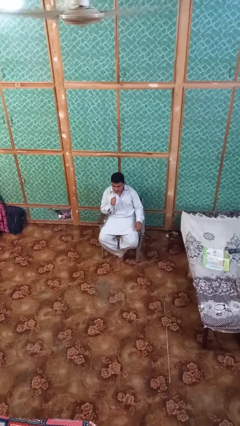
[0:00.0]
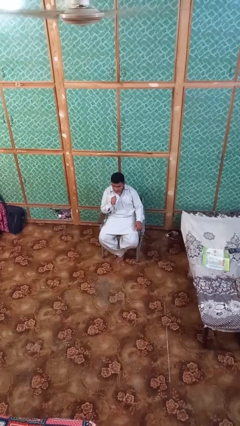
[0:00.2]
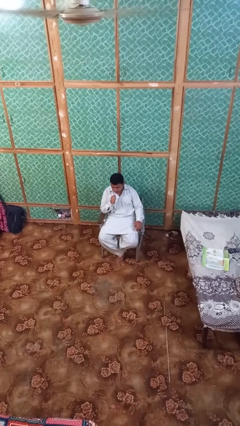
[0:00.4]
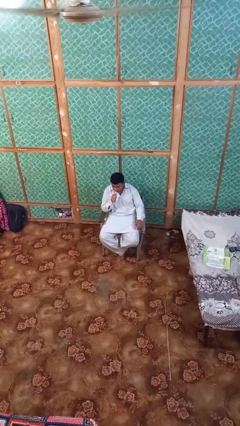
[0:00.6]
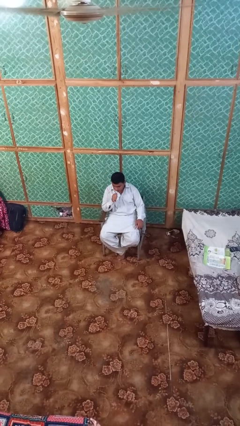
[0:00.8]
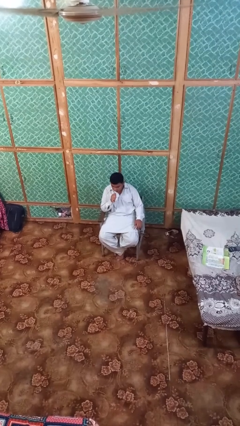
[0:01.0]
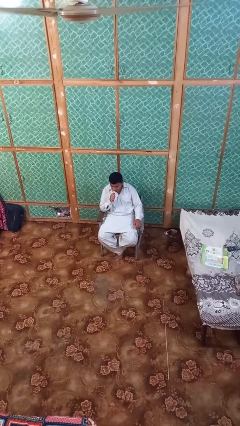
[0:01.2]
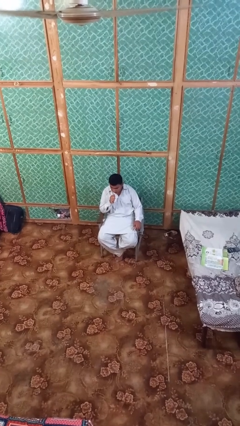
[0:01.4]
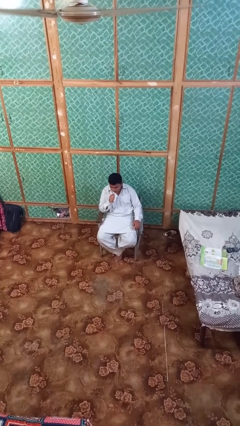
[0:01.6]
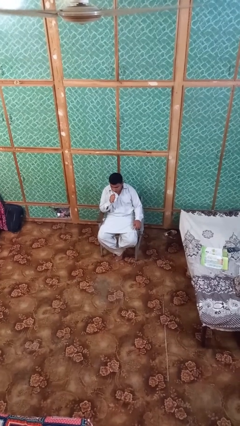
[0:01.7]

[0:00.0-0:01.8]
person vapes

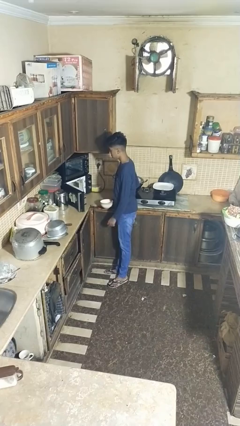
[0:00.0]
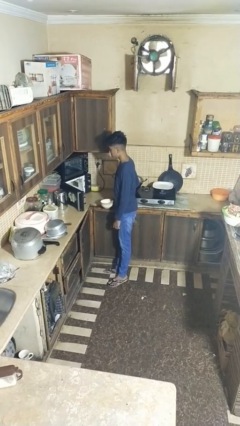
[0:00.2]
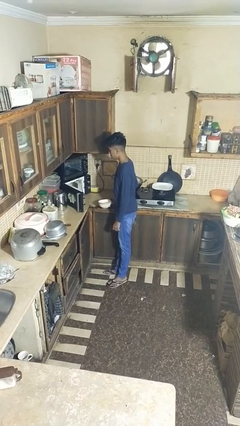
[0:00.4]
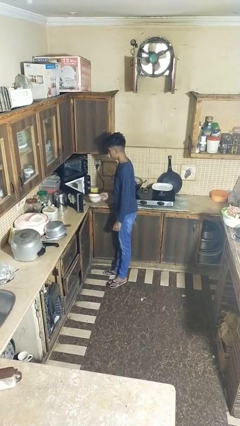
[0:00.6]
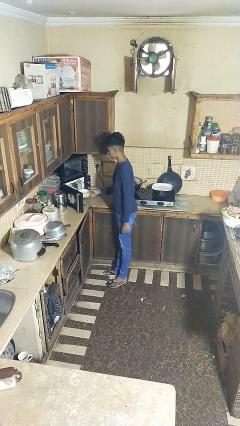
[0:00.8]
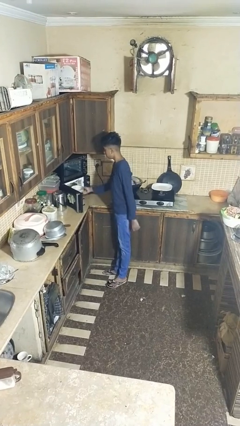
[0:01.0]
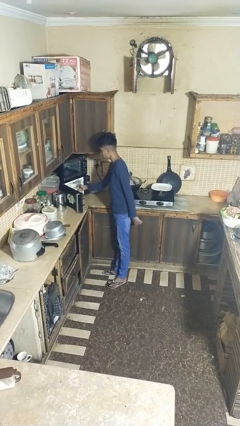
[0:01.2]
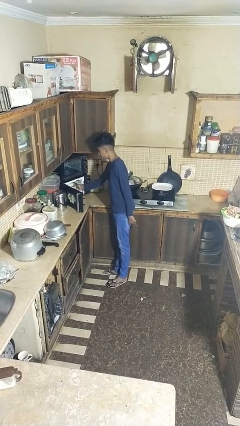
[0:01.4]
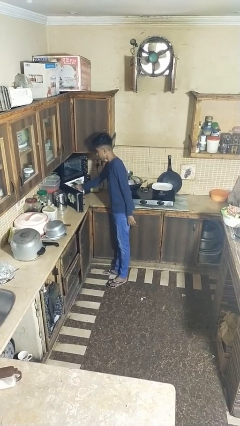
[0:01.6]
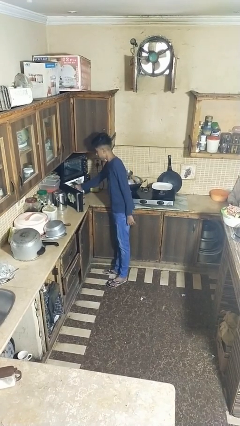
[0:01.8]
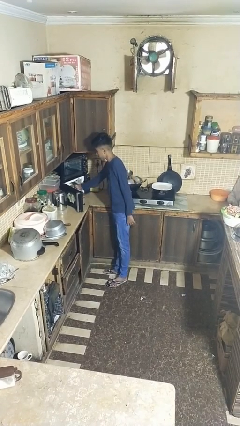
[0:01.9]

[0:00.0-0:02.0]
person puts object into microwave

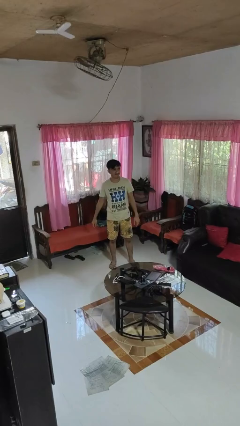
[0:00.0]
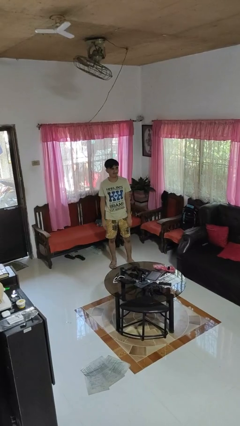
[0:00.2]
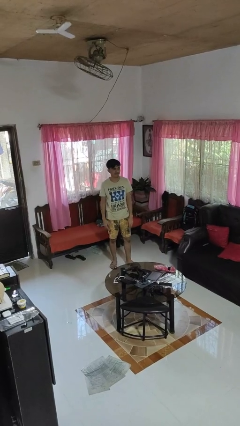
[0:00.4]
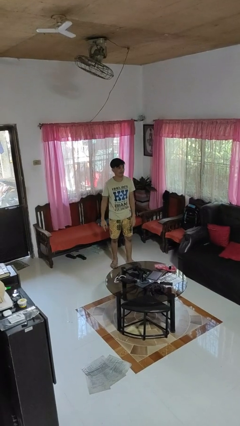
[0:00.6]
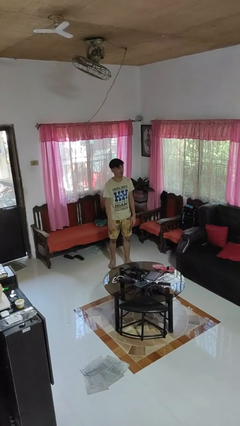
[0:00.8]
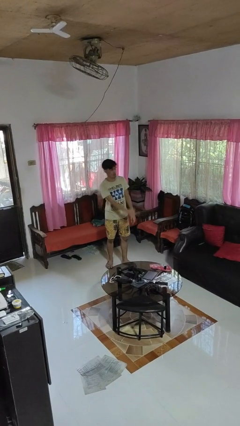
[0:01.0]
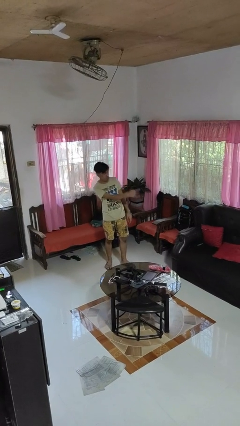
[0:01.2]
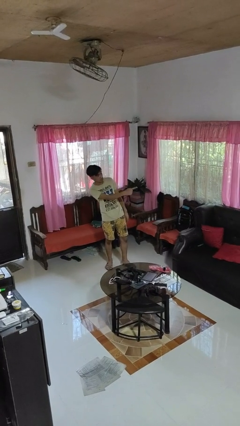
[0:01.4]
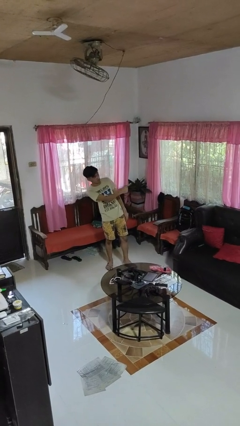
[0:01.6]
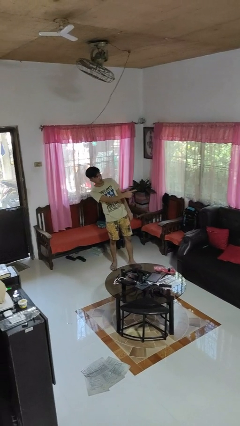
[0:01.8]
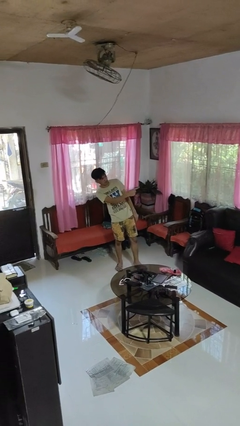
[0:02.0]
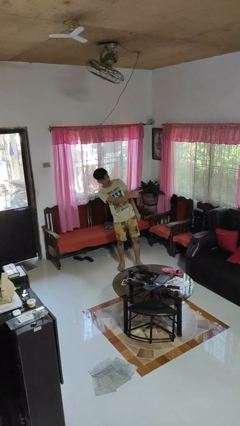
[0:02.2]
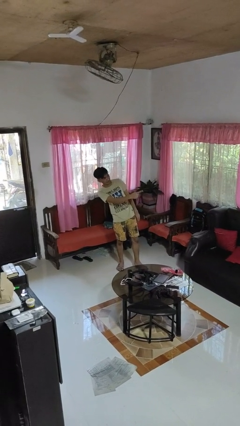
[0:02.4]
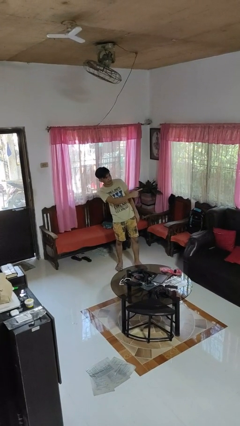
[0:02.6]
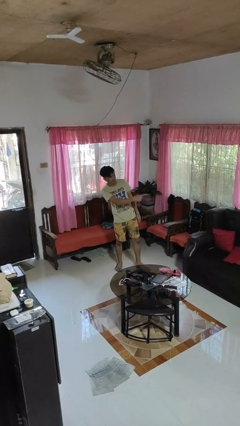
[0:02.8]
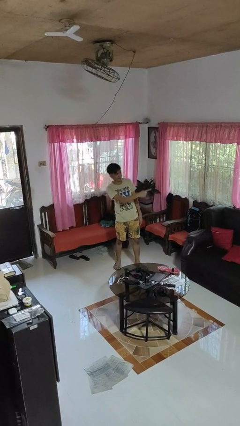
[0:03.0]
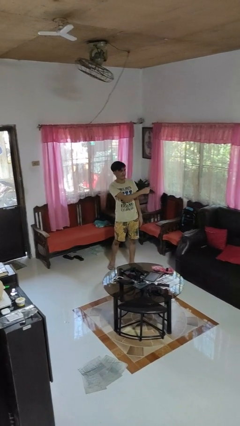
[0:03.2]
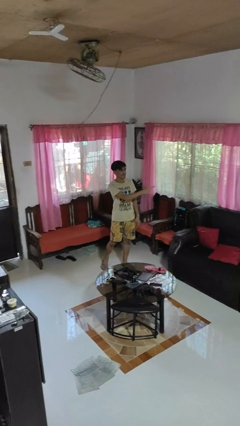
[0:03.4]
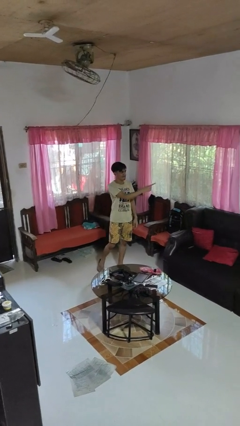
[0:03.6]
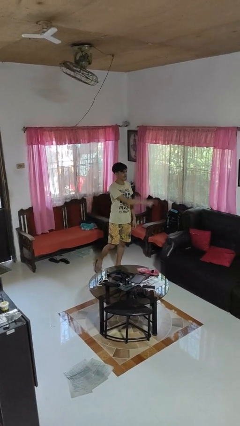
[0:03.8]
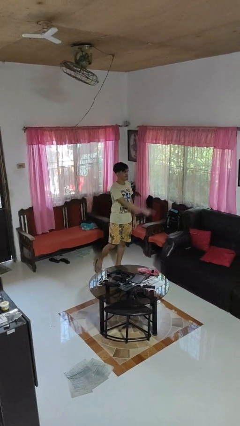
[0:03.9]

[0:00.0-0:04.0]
person points at person

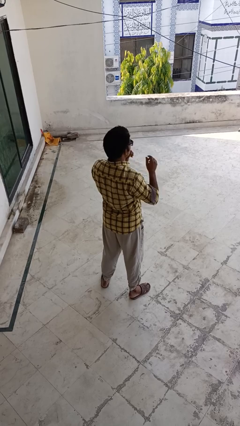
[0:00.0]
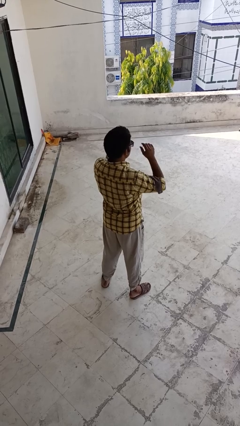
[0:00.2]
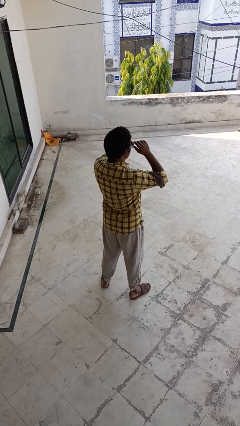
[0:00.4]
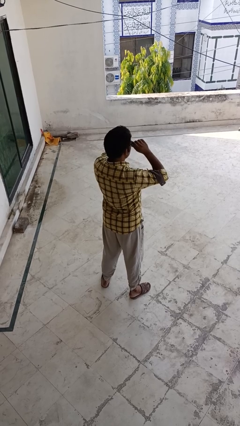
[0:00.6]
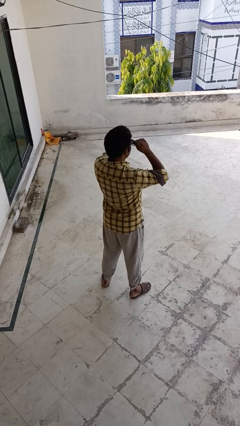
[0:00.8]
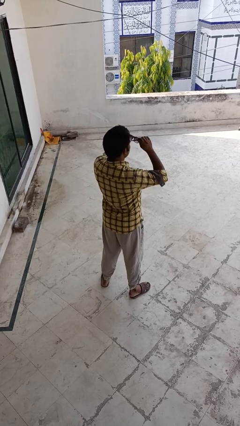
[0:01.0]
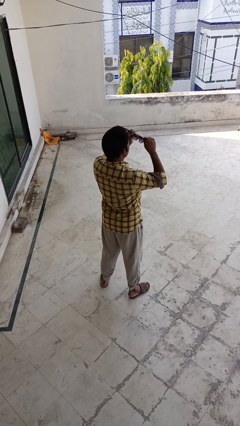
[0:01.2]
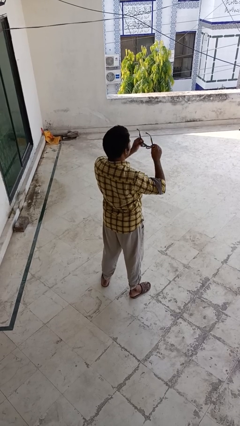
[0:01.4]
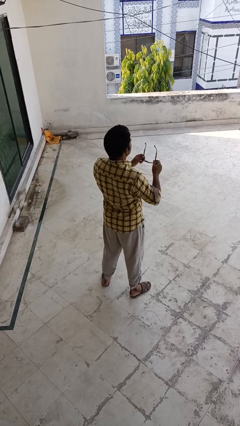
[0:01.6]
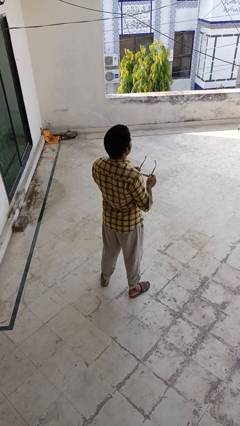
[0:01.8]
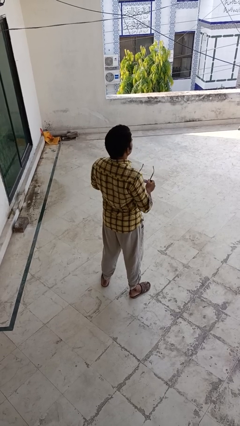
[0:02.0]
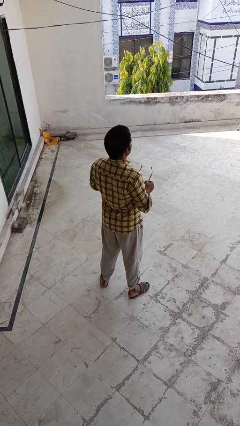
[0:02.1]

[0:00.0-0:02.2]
person takes off sunglasses

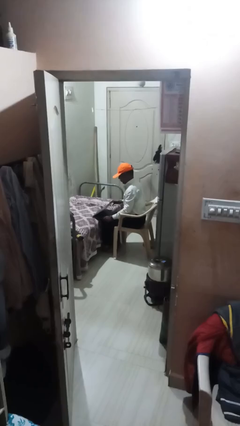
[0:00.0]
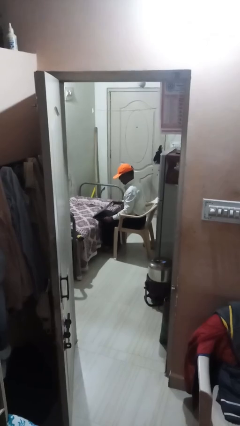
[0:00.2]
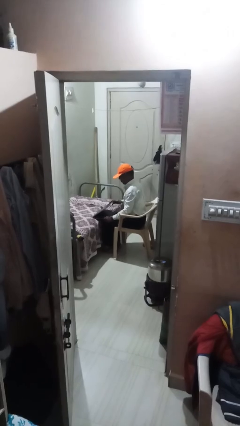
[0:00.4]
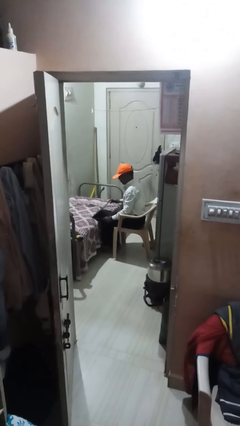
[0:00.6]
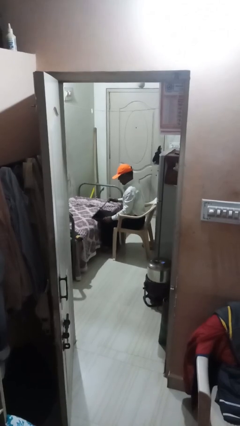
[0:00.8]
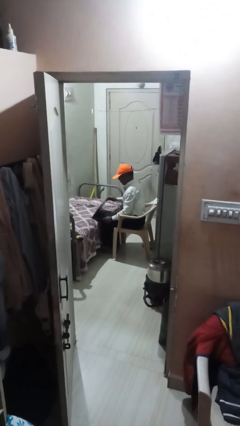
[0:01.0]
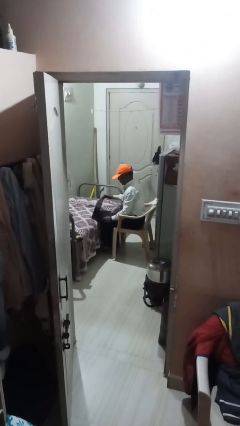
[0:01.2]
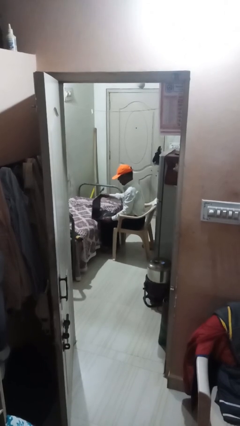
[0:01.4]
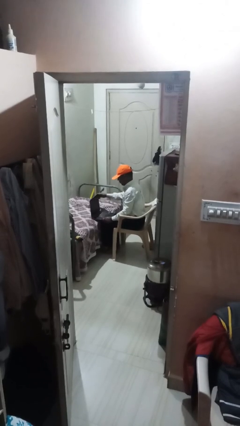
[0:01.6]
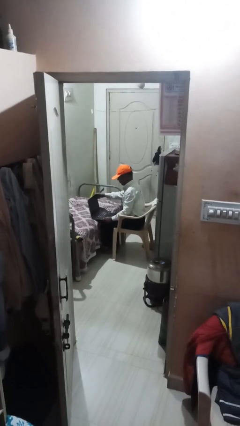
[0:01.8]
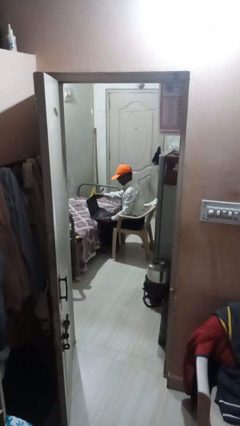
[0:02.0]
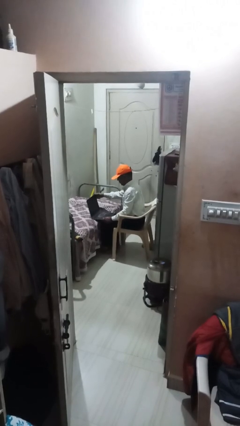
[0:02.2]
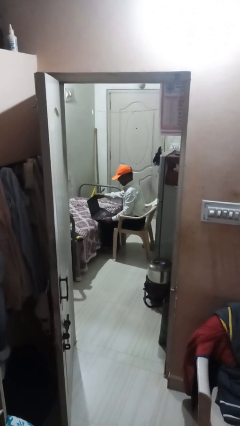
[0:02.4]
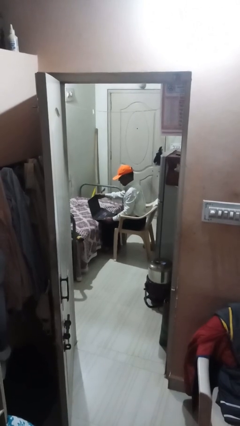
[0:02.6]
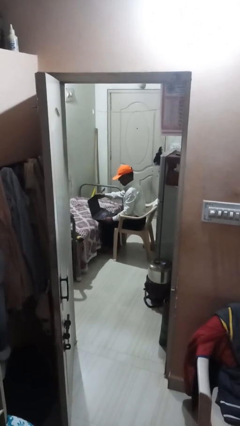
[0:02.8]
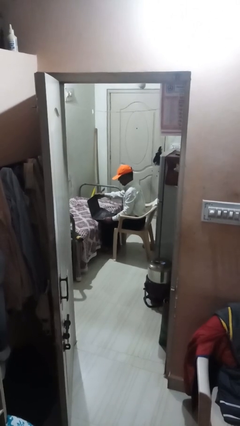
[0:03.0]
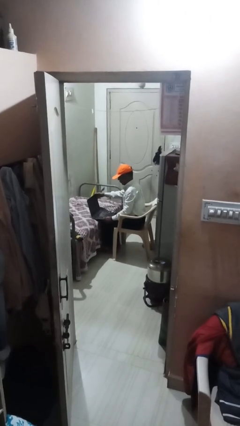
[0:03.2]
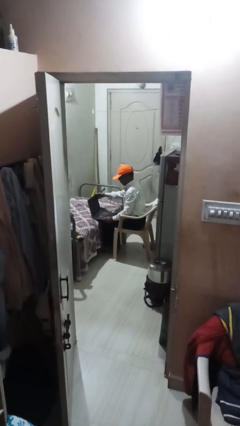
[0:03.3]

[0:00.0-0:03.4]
person interacts with laptop

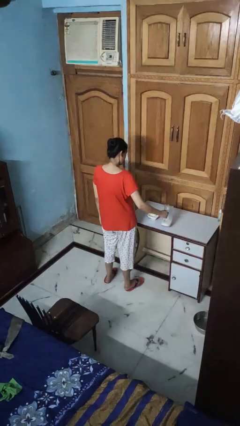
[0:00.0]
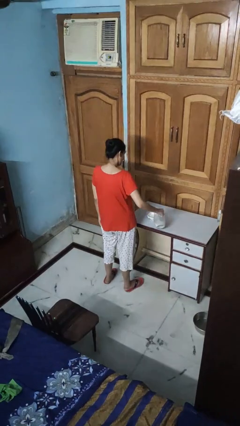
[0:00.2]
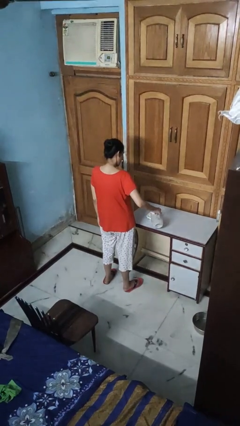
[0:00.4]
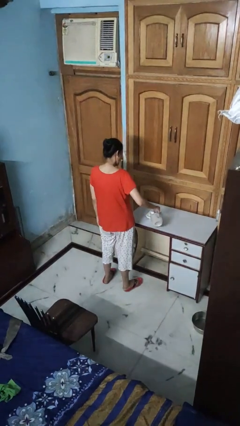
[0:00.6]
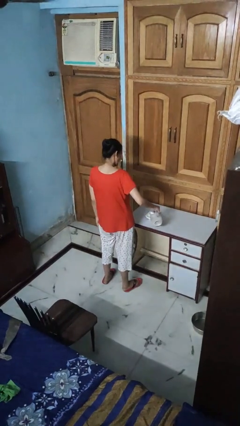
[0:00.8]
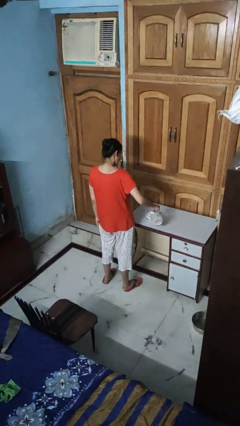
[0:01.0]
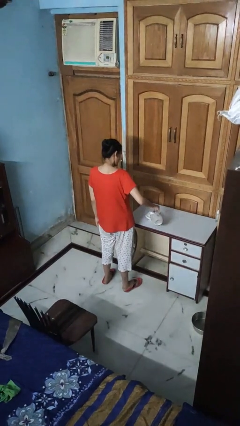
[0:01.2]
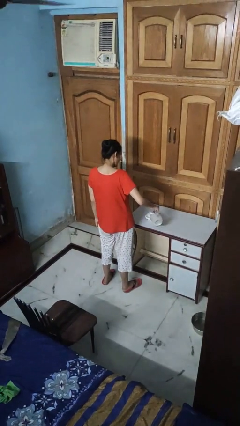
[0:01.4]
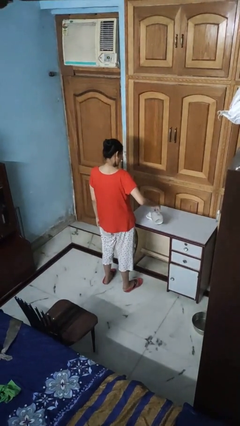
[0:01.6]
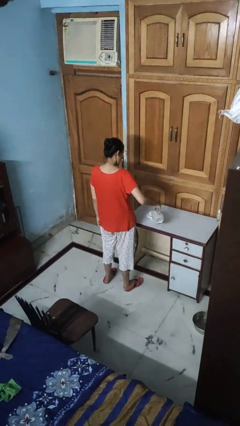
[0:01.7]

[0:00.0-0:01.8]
person pours into bowl

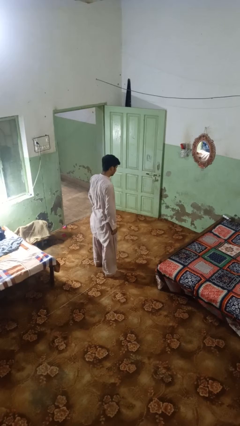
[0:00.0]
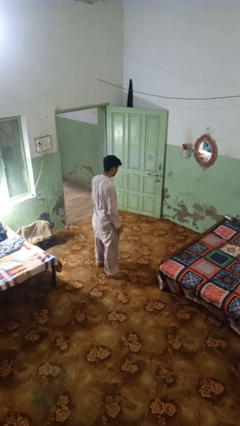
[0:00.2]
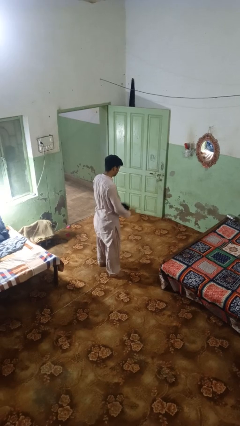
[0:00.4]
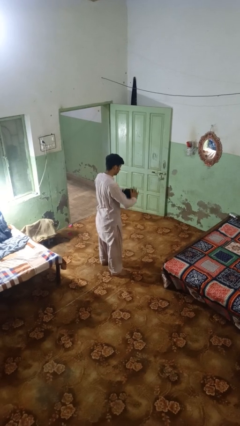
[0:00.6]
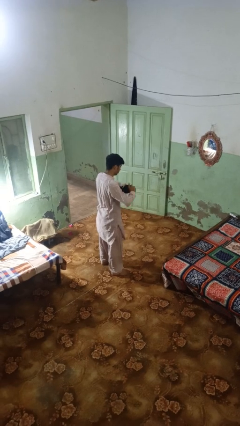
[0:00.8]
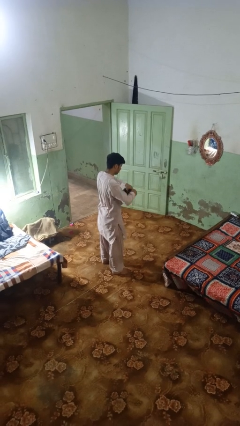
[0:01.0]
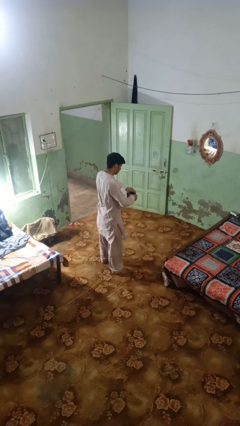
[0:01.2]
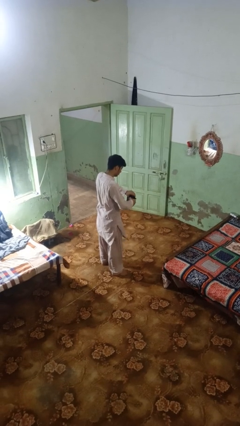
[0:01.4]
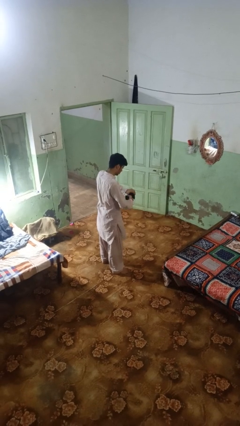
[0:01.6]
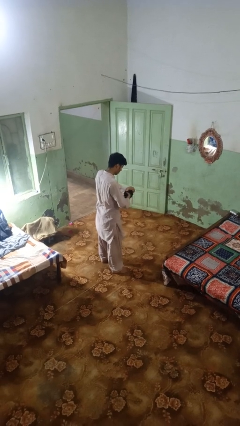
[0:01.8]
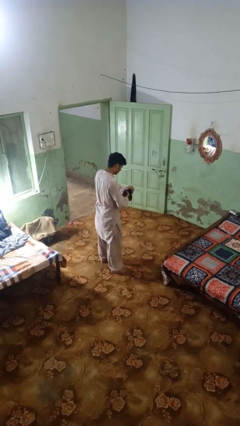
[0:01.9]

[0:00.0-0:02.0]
person squeezes object
